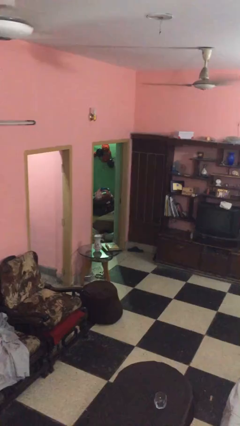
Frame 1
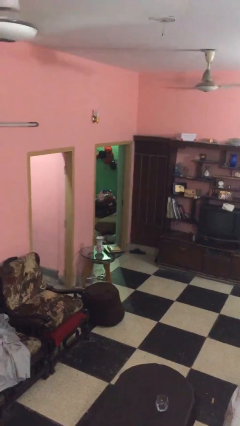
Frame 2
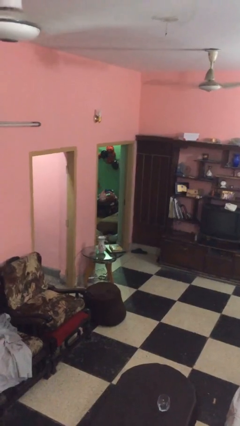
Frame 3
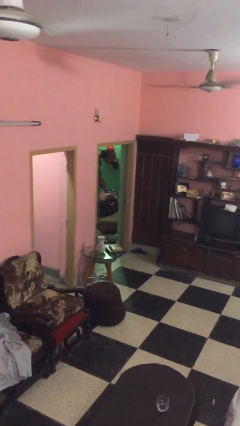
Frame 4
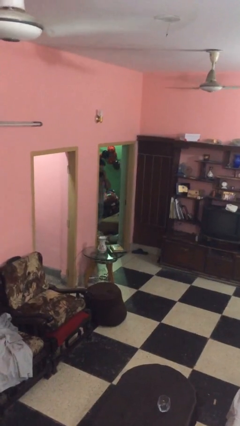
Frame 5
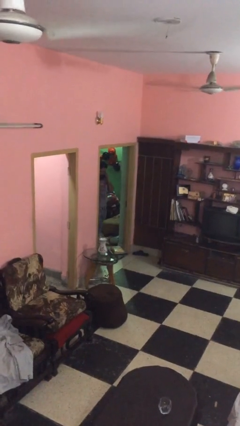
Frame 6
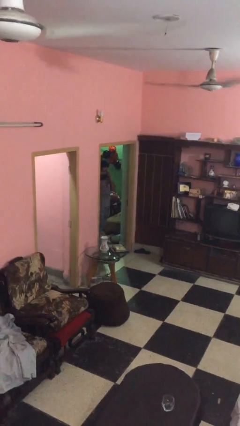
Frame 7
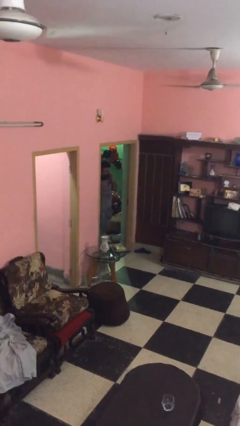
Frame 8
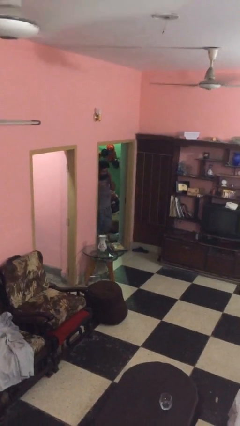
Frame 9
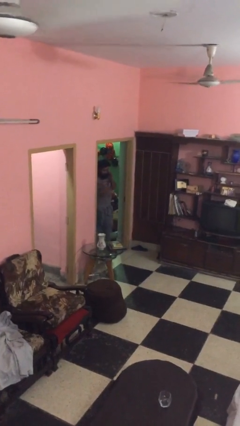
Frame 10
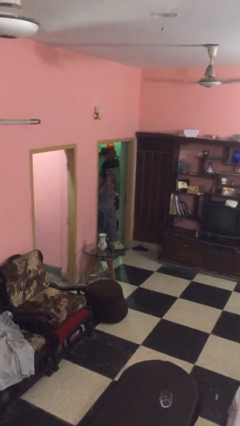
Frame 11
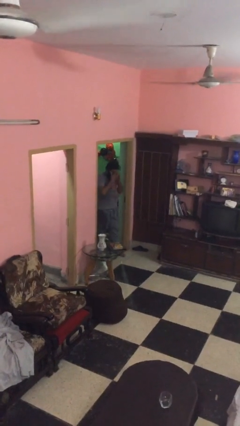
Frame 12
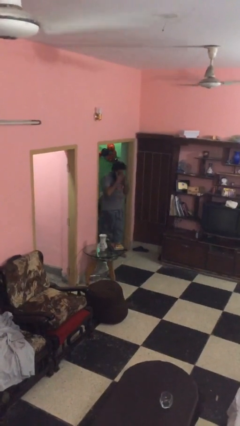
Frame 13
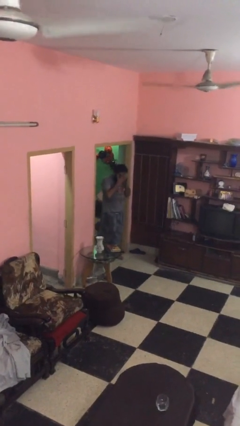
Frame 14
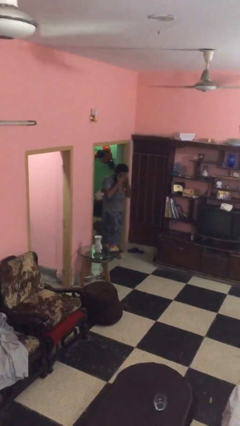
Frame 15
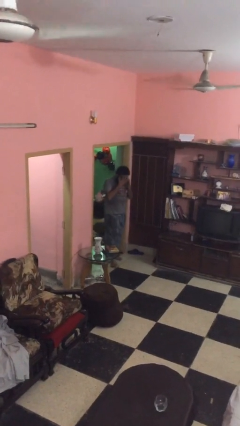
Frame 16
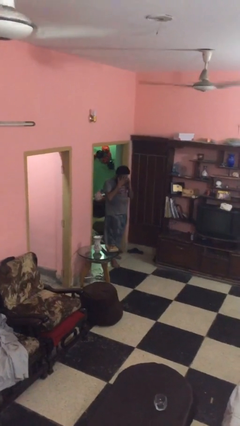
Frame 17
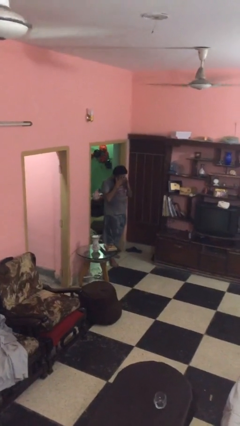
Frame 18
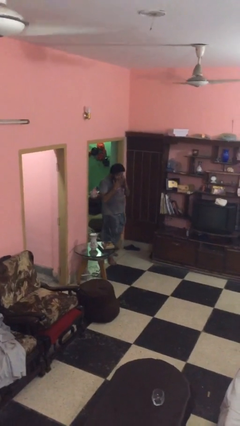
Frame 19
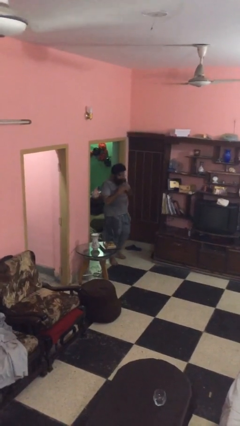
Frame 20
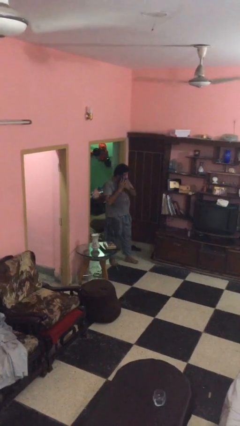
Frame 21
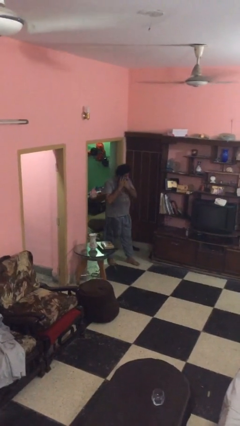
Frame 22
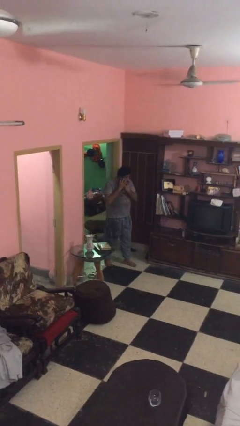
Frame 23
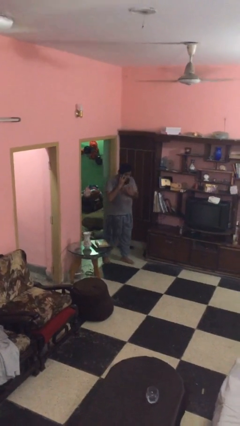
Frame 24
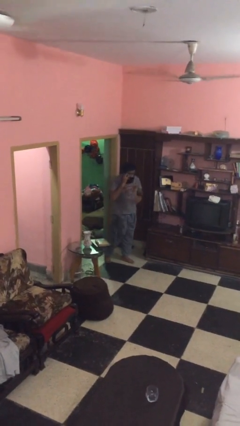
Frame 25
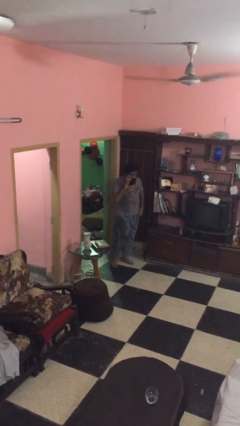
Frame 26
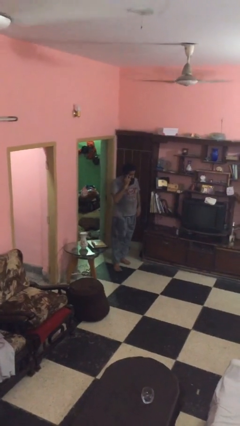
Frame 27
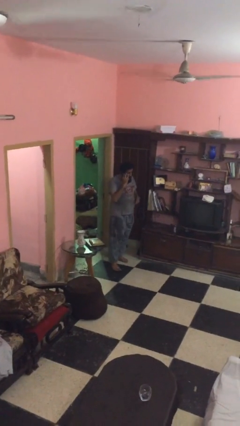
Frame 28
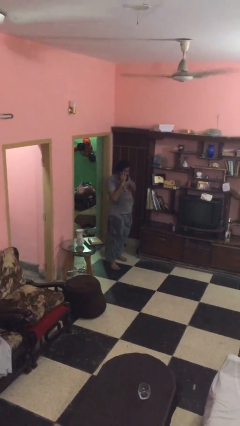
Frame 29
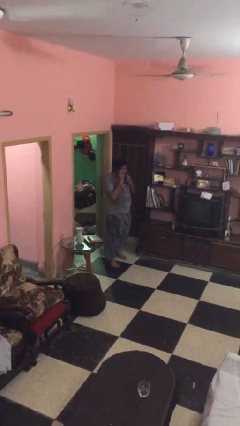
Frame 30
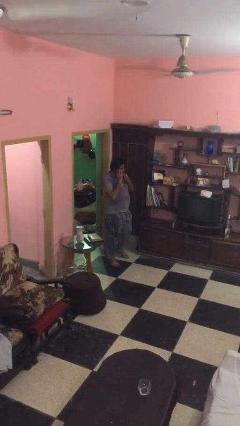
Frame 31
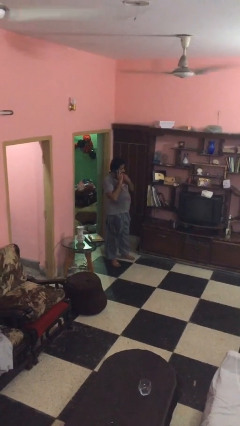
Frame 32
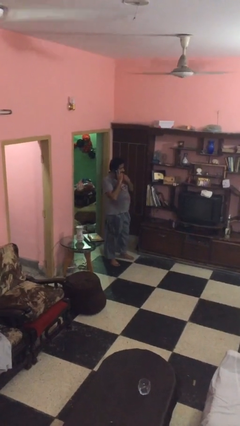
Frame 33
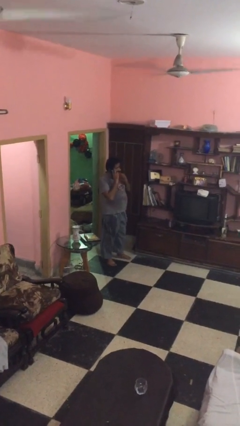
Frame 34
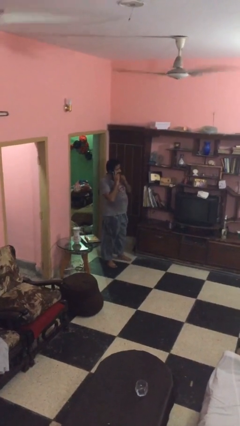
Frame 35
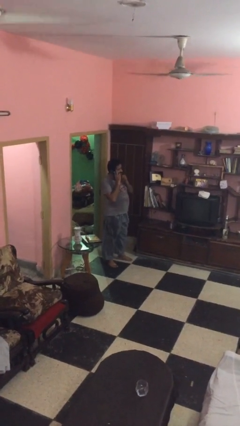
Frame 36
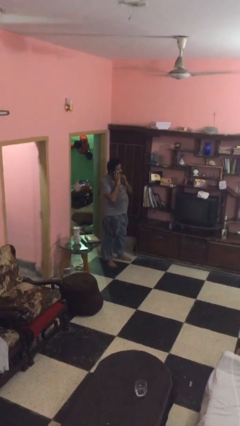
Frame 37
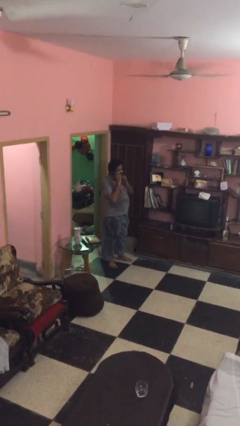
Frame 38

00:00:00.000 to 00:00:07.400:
person enters scene through structure

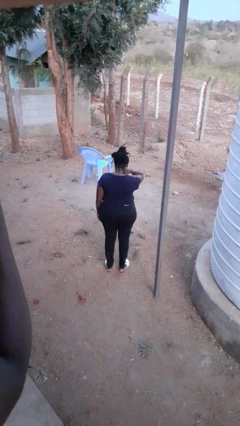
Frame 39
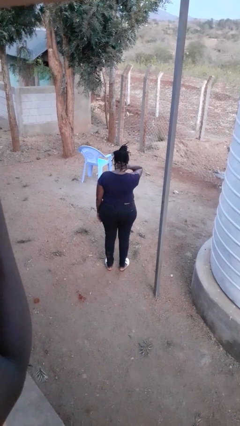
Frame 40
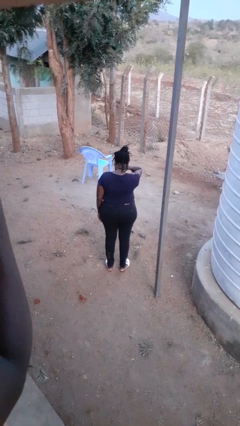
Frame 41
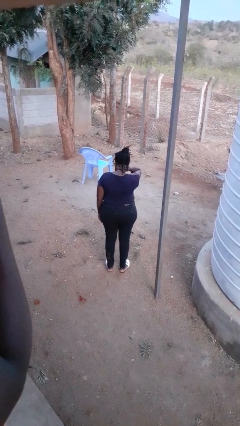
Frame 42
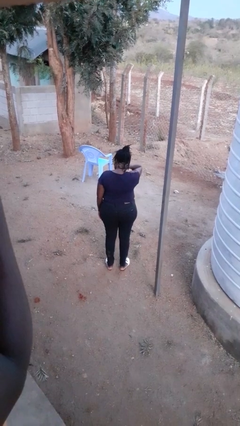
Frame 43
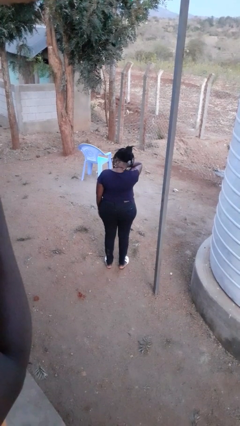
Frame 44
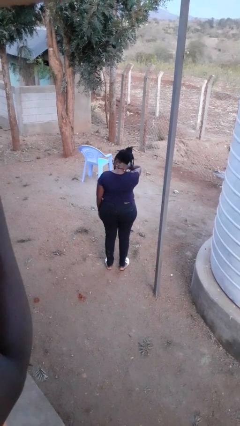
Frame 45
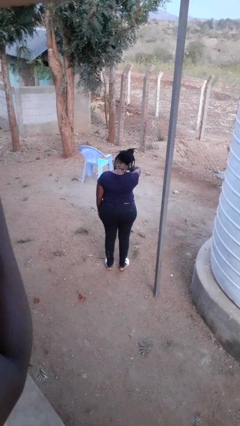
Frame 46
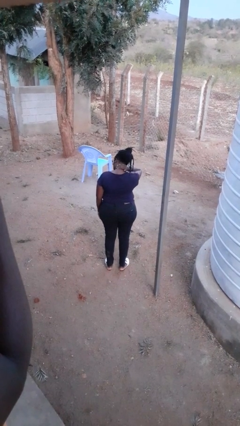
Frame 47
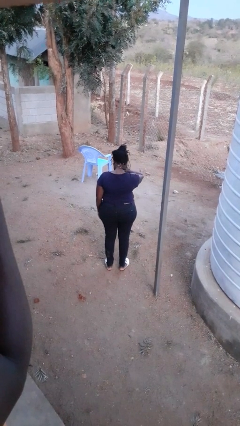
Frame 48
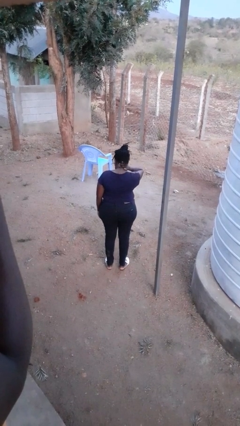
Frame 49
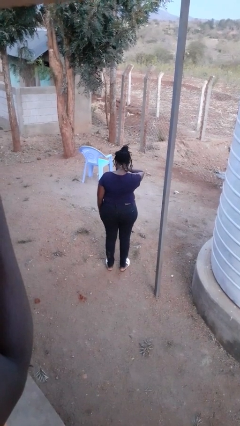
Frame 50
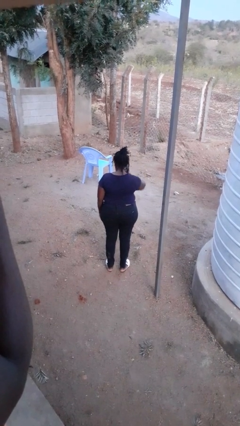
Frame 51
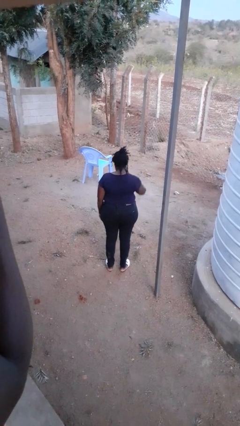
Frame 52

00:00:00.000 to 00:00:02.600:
person rubs neck

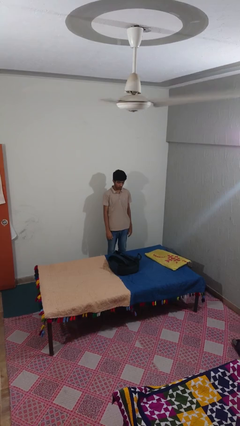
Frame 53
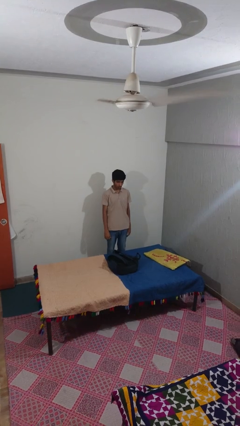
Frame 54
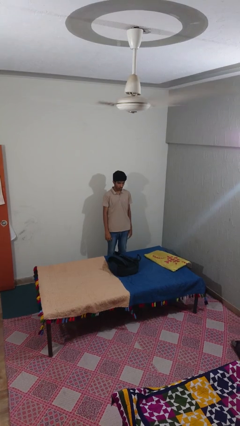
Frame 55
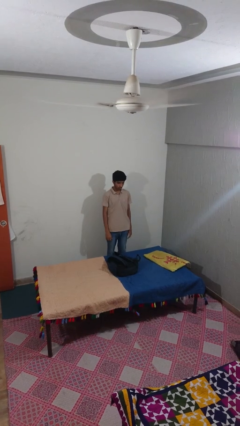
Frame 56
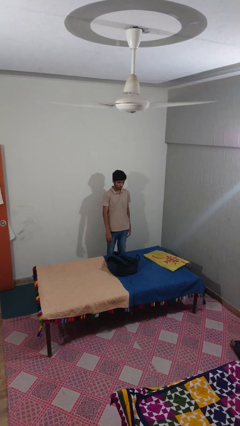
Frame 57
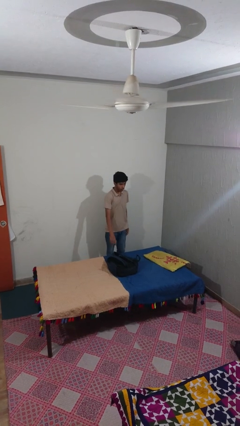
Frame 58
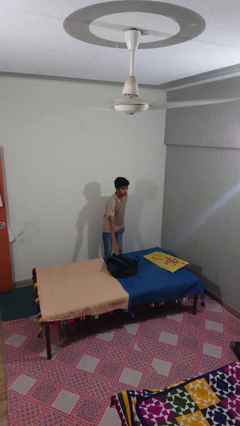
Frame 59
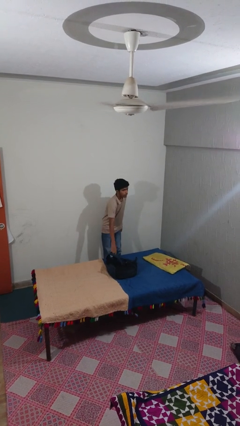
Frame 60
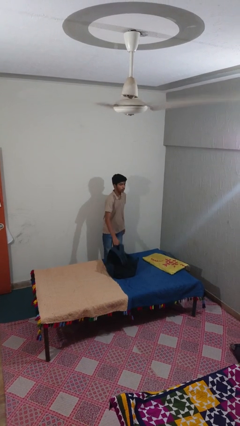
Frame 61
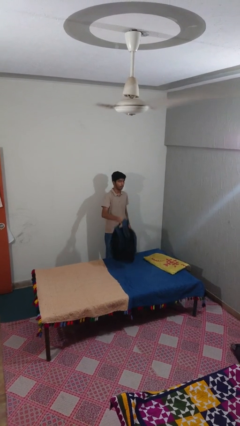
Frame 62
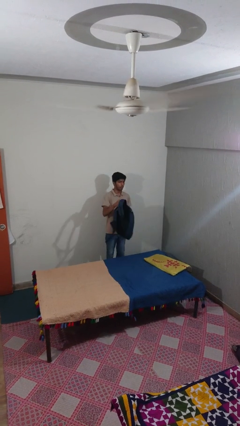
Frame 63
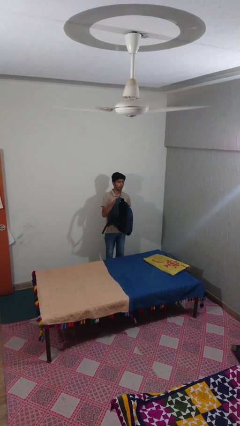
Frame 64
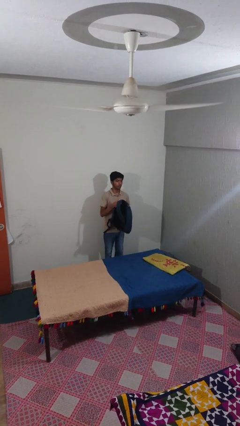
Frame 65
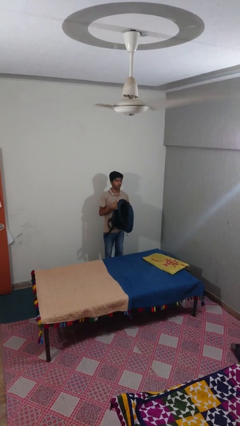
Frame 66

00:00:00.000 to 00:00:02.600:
person picks up object from bed

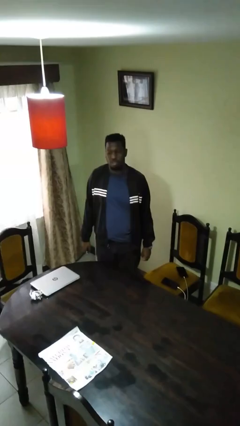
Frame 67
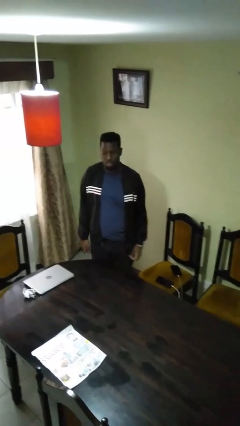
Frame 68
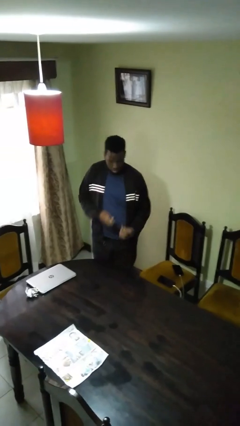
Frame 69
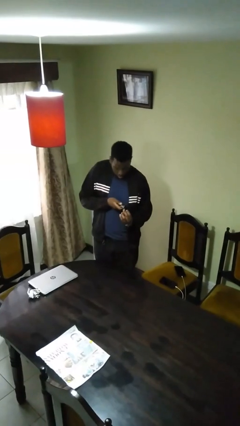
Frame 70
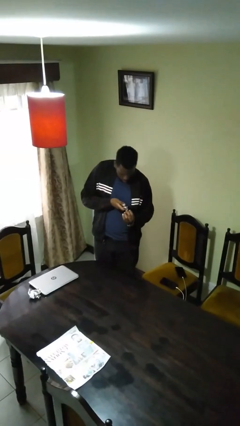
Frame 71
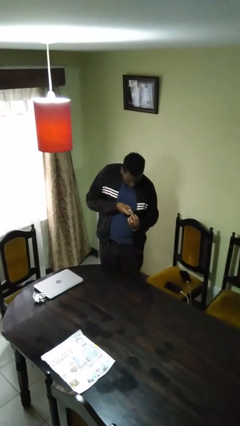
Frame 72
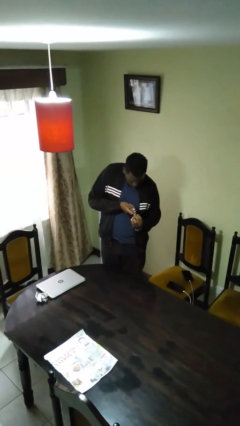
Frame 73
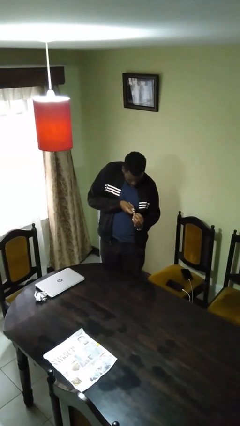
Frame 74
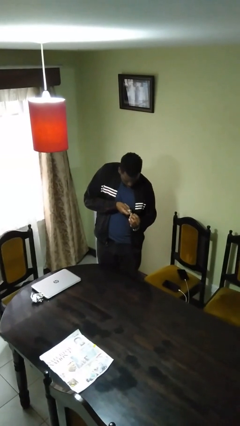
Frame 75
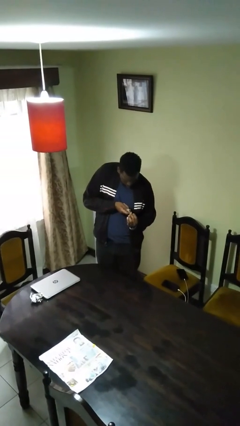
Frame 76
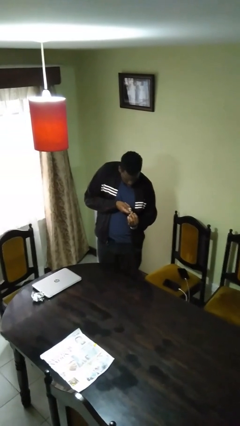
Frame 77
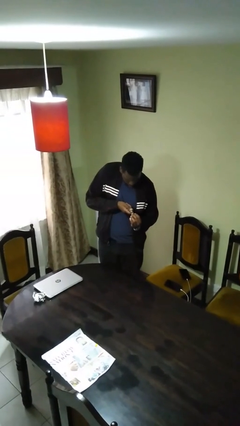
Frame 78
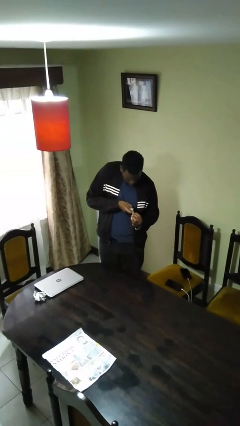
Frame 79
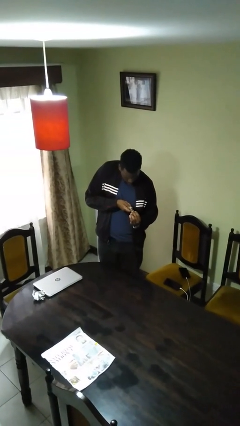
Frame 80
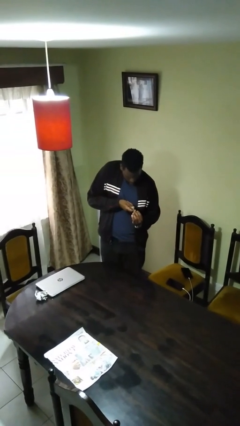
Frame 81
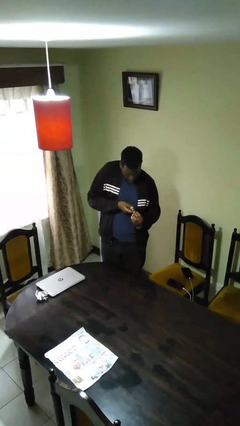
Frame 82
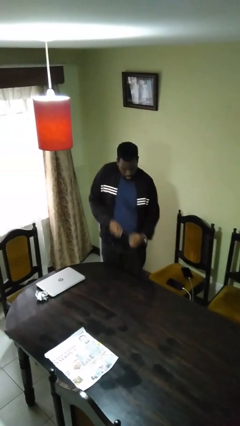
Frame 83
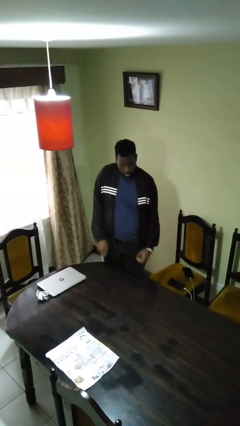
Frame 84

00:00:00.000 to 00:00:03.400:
person clips fingernails

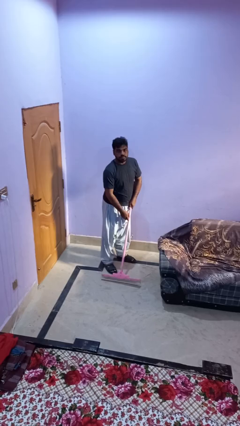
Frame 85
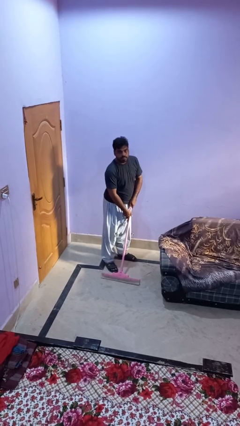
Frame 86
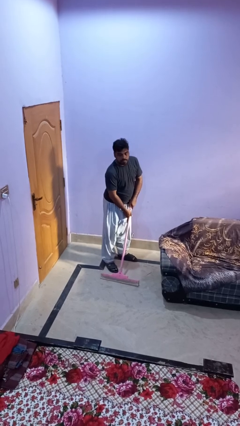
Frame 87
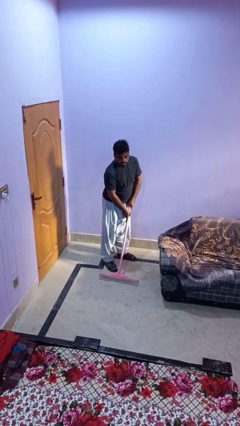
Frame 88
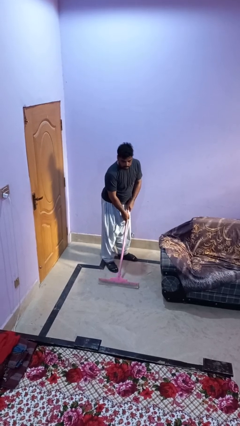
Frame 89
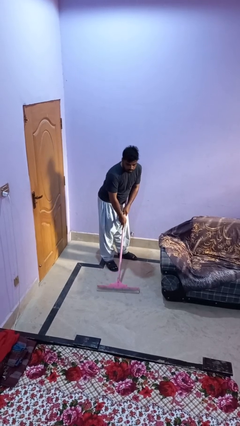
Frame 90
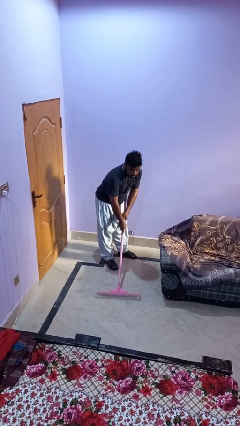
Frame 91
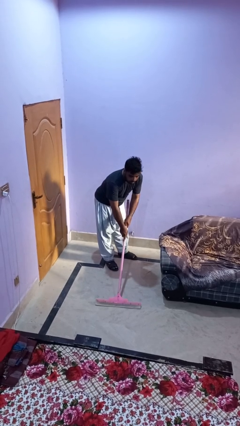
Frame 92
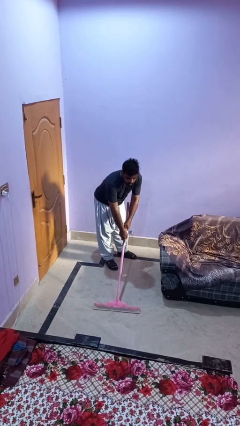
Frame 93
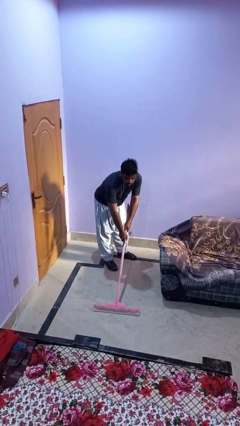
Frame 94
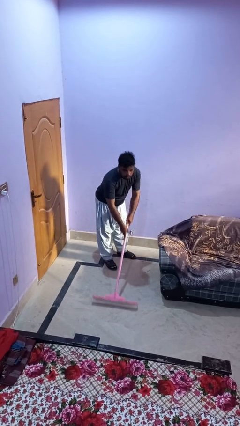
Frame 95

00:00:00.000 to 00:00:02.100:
person vacuums carpet
